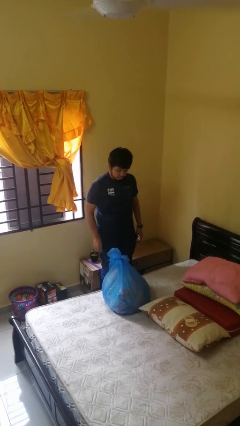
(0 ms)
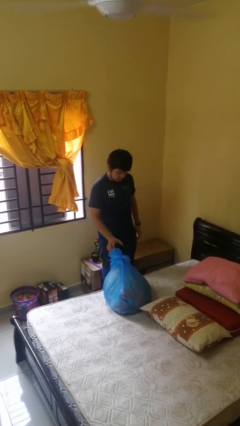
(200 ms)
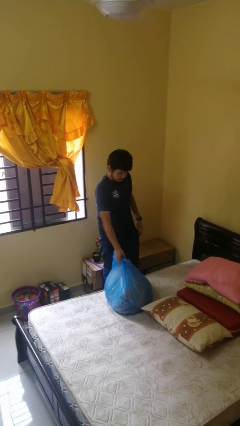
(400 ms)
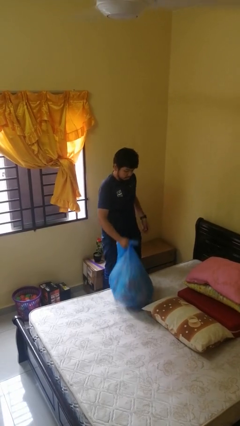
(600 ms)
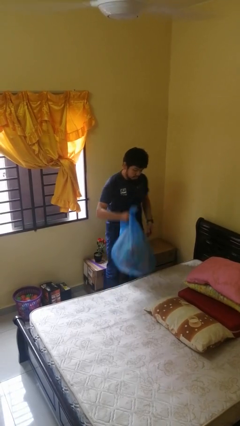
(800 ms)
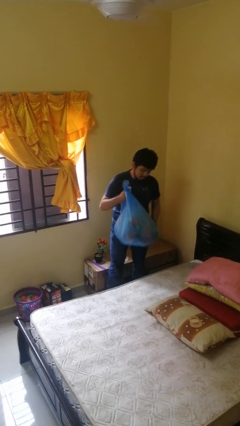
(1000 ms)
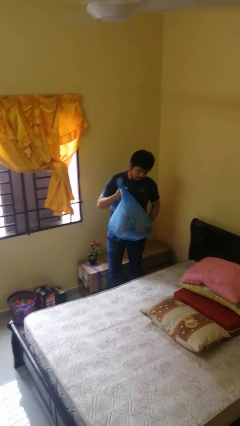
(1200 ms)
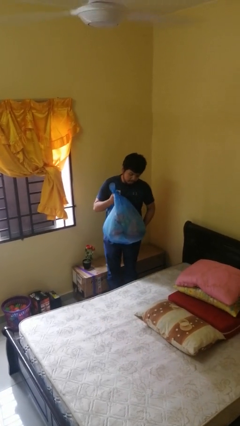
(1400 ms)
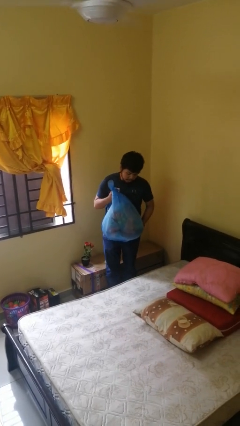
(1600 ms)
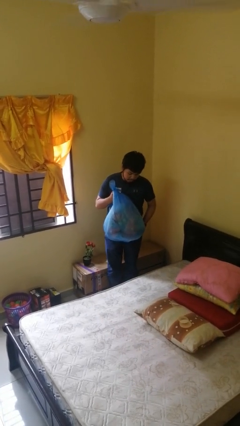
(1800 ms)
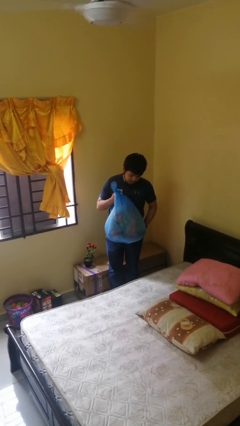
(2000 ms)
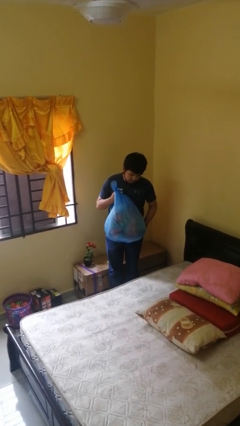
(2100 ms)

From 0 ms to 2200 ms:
person picks up object from bed

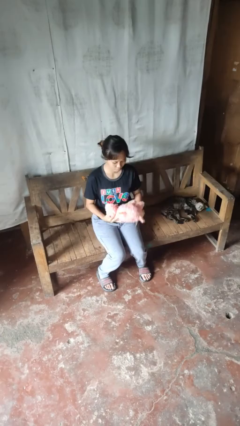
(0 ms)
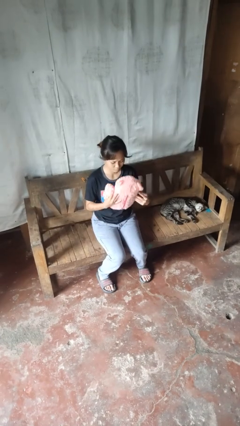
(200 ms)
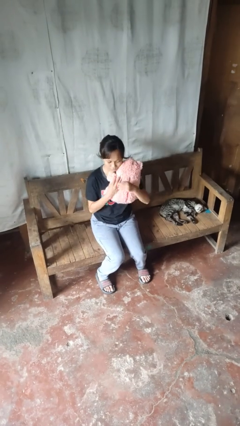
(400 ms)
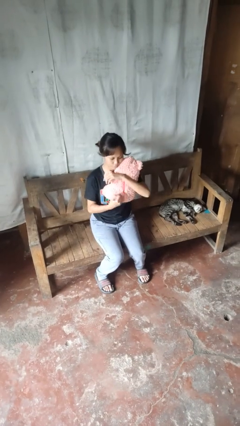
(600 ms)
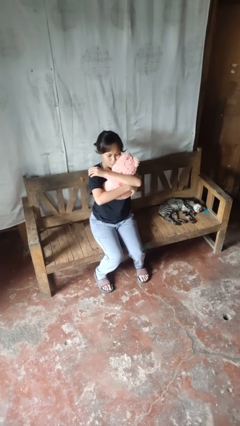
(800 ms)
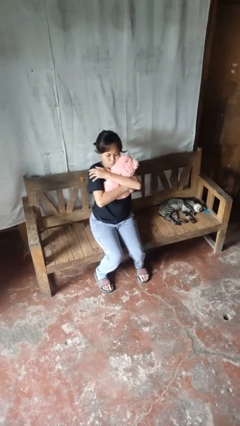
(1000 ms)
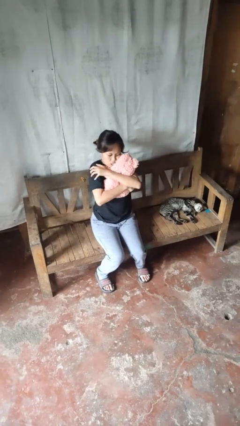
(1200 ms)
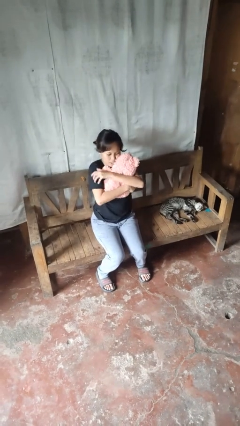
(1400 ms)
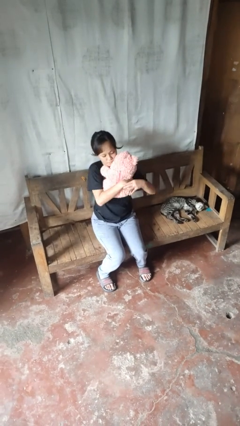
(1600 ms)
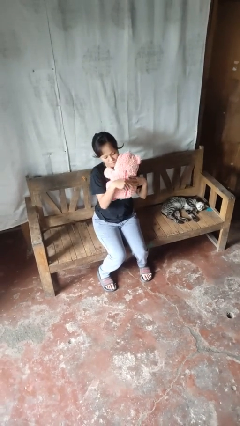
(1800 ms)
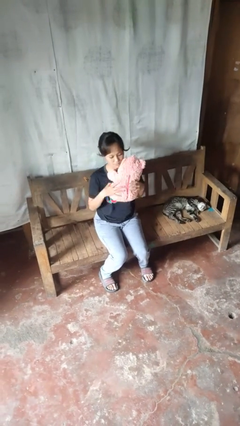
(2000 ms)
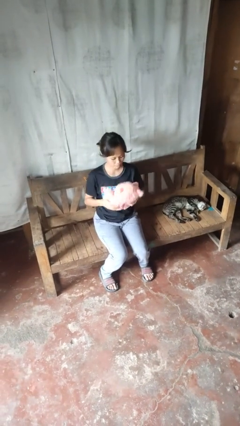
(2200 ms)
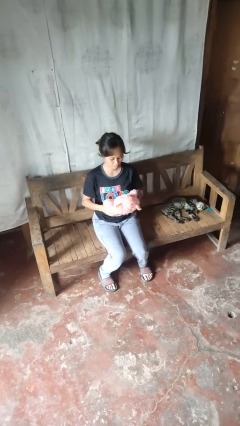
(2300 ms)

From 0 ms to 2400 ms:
person hugs stuffed animal

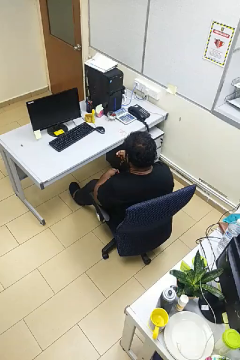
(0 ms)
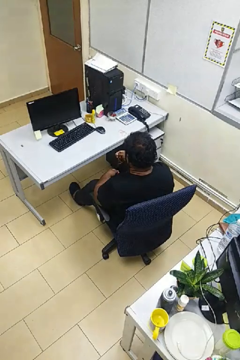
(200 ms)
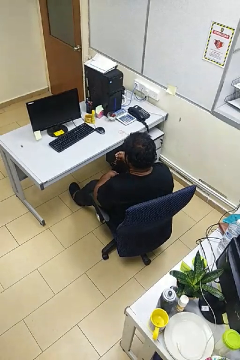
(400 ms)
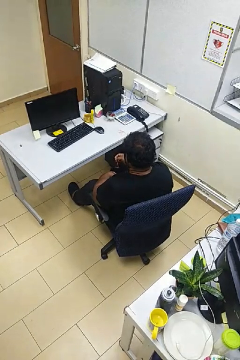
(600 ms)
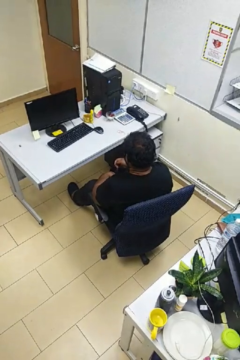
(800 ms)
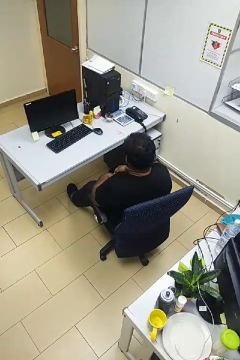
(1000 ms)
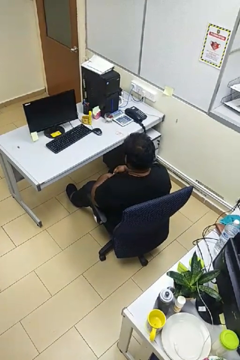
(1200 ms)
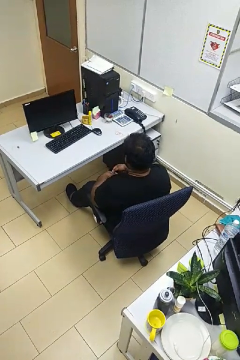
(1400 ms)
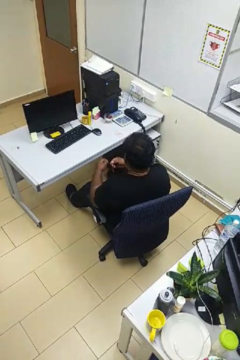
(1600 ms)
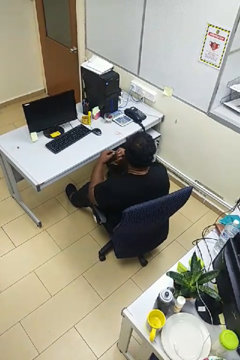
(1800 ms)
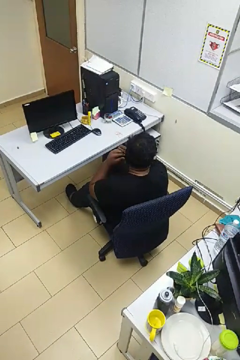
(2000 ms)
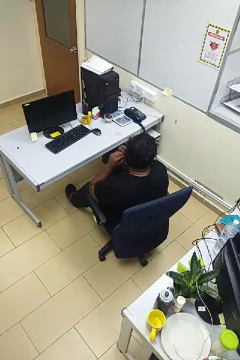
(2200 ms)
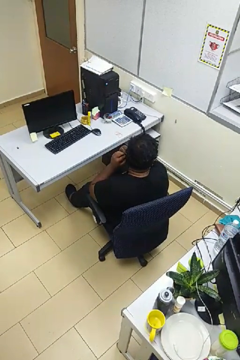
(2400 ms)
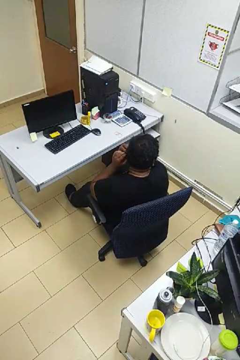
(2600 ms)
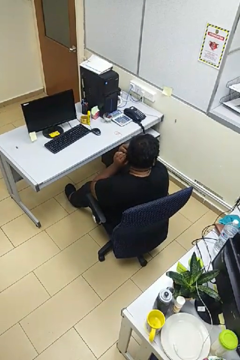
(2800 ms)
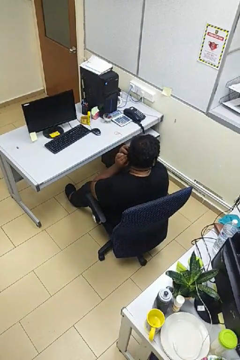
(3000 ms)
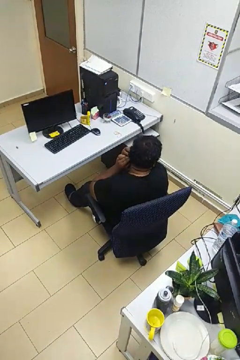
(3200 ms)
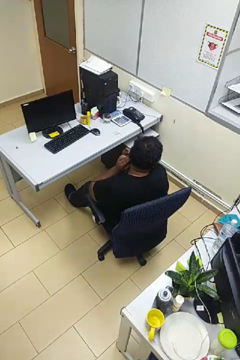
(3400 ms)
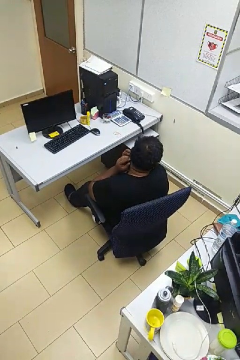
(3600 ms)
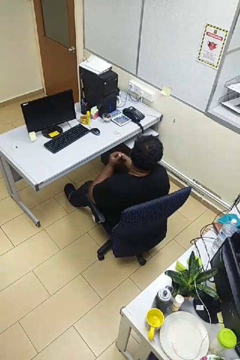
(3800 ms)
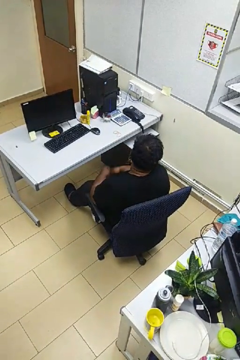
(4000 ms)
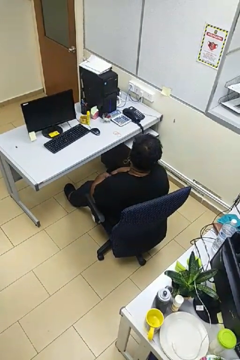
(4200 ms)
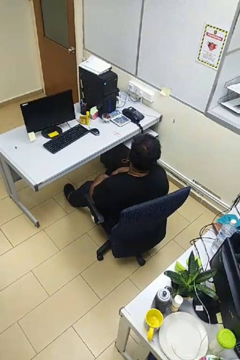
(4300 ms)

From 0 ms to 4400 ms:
person puts on earrings

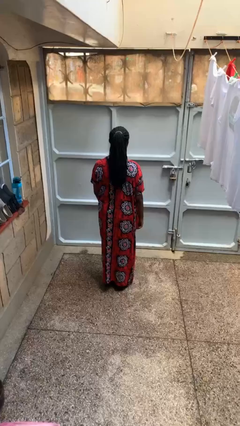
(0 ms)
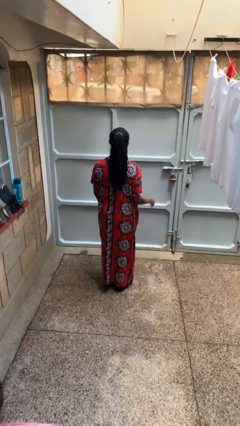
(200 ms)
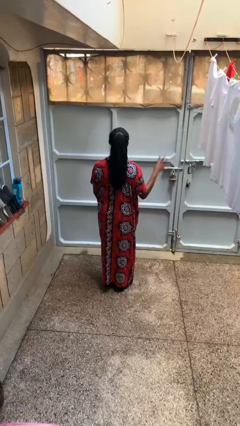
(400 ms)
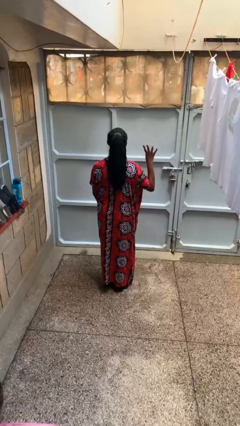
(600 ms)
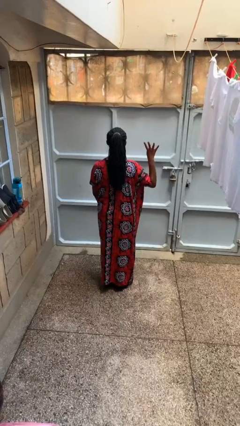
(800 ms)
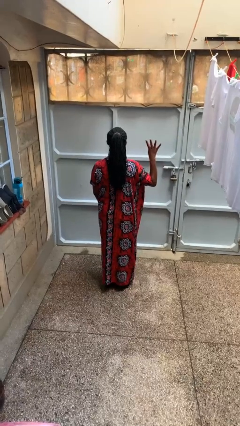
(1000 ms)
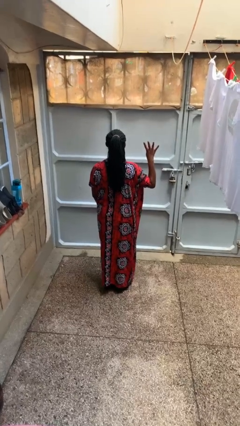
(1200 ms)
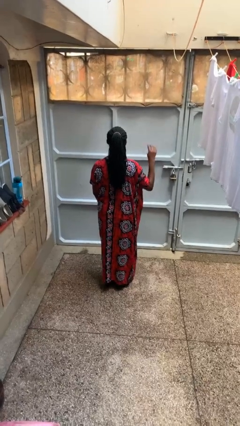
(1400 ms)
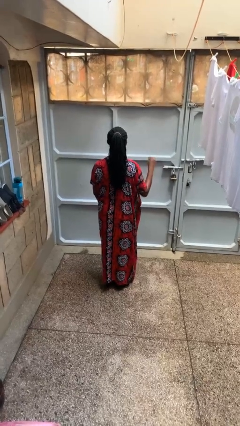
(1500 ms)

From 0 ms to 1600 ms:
person gestures number four

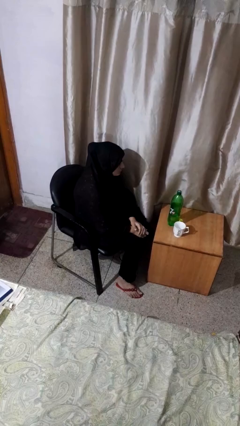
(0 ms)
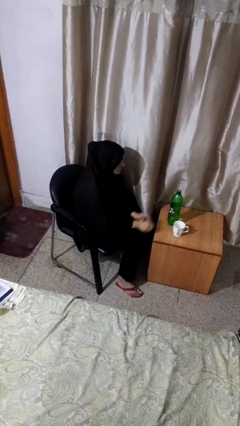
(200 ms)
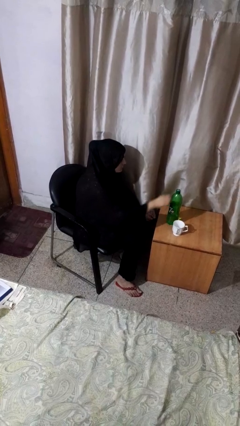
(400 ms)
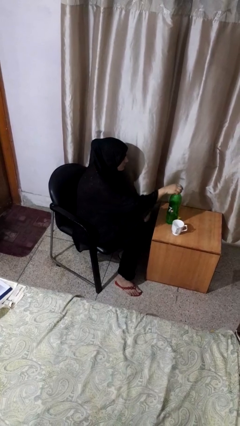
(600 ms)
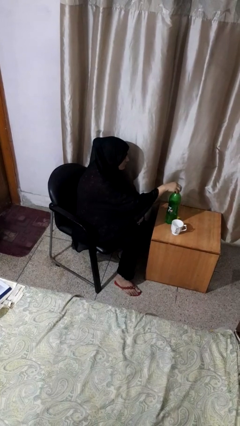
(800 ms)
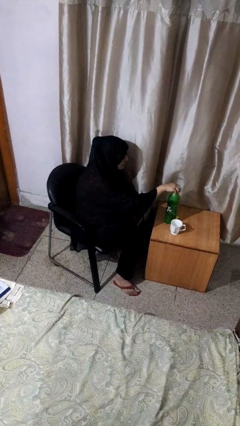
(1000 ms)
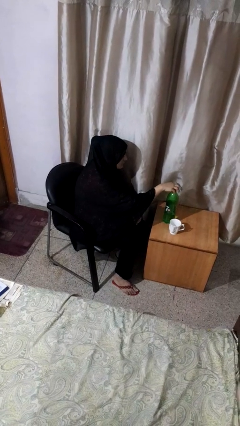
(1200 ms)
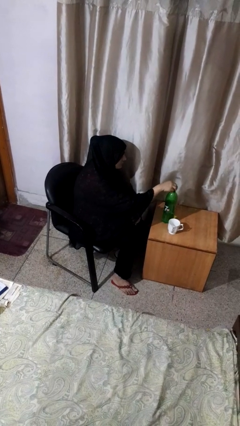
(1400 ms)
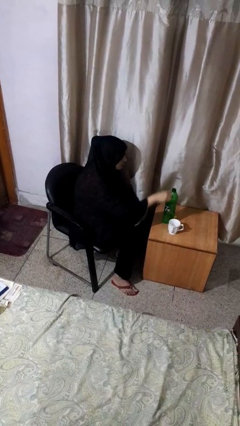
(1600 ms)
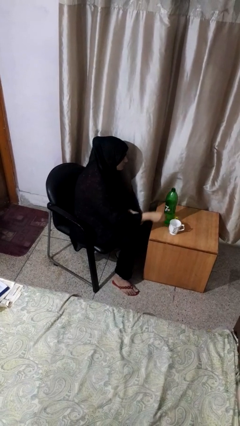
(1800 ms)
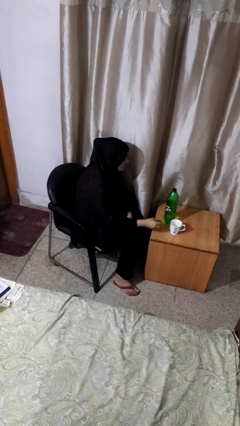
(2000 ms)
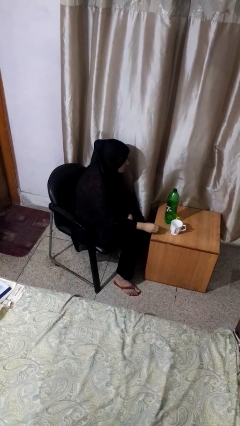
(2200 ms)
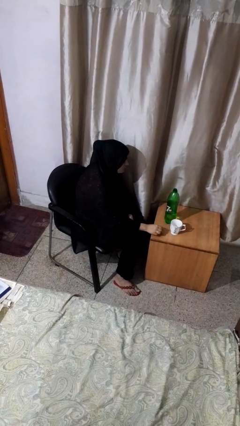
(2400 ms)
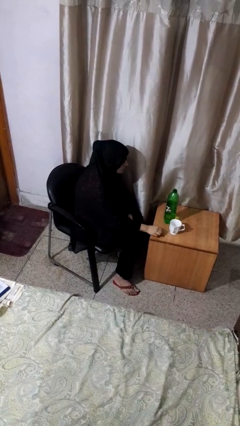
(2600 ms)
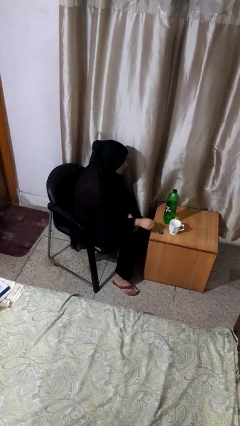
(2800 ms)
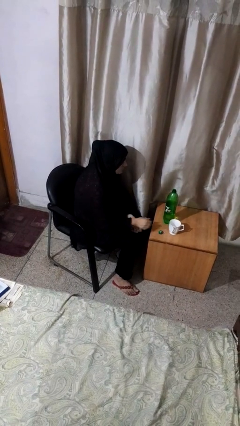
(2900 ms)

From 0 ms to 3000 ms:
person unscrews lid from bottle

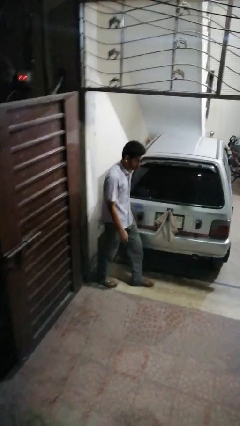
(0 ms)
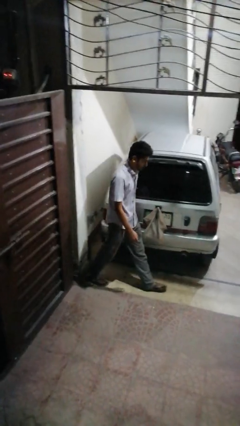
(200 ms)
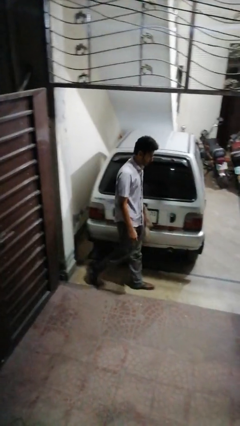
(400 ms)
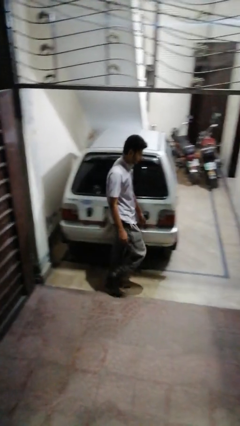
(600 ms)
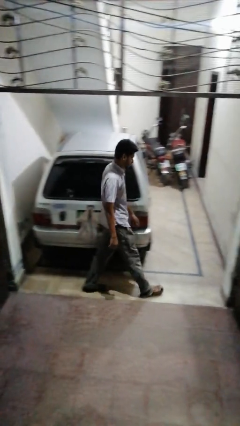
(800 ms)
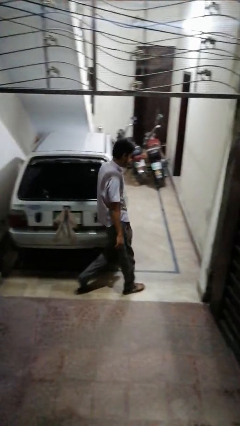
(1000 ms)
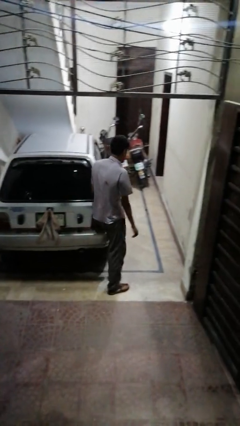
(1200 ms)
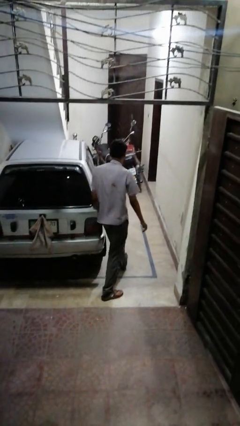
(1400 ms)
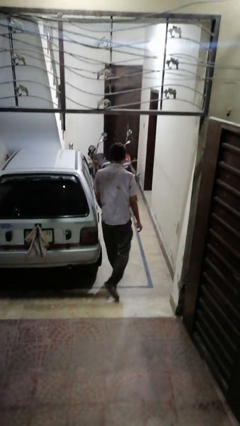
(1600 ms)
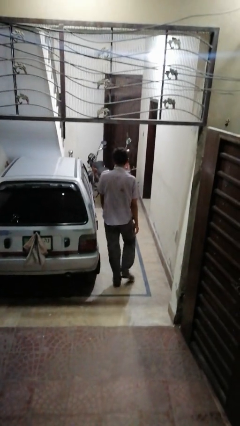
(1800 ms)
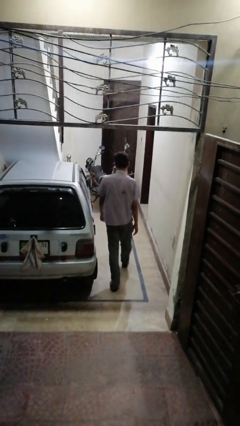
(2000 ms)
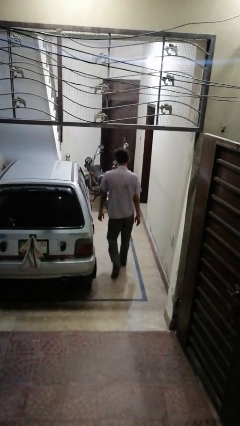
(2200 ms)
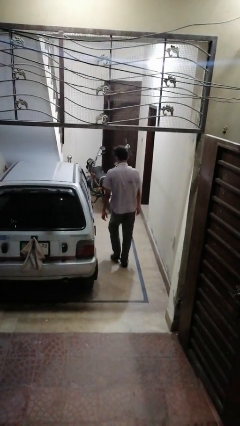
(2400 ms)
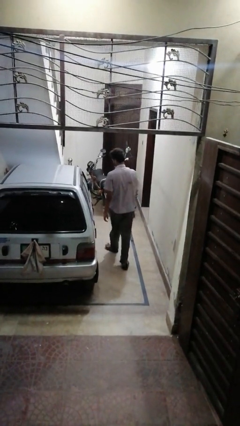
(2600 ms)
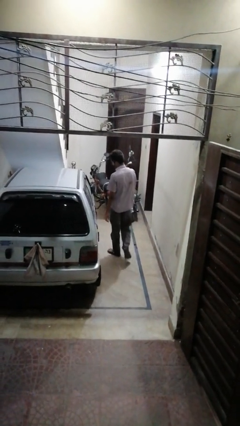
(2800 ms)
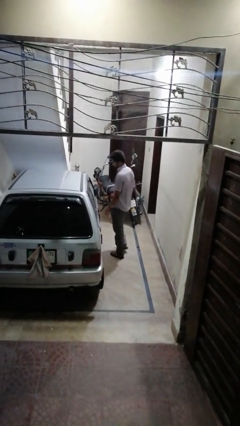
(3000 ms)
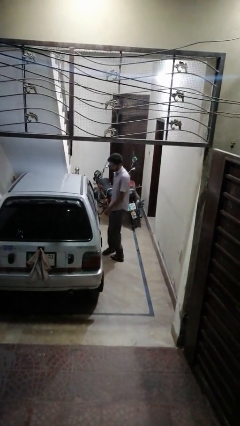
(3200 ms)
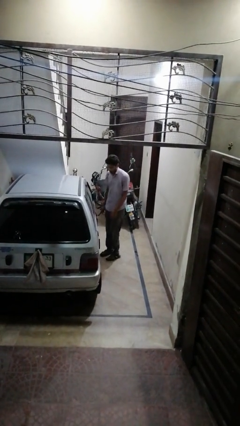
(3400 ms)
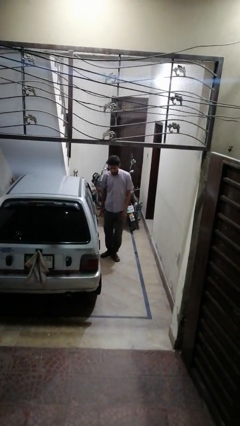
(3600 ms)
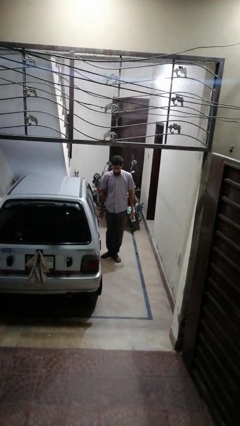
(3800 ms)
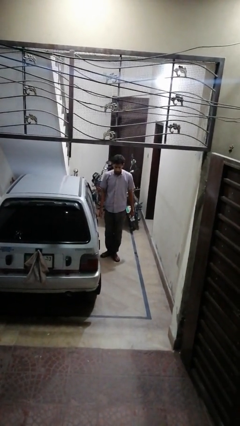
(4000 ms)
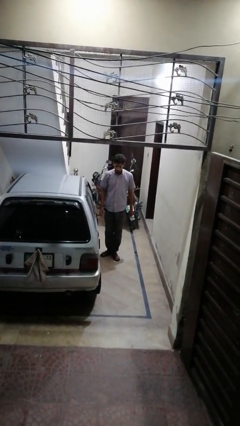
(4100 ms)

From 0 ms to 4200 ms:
person walks around car

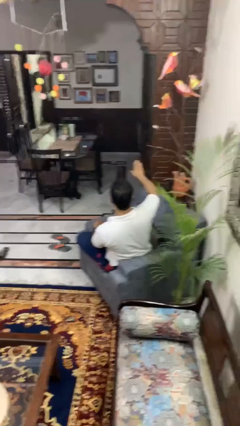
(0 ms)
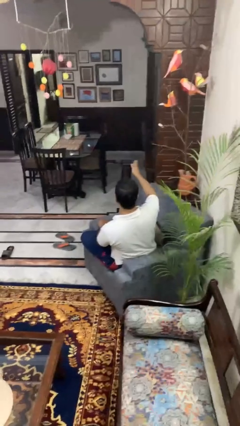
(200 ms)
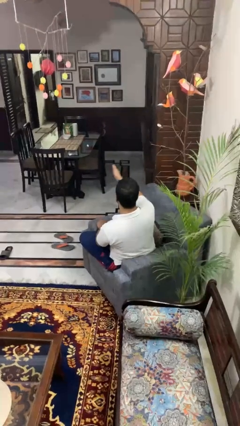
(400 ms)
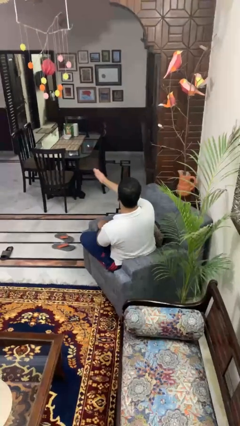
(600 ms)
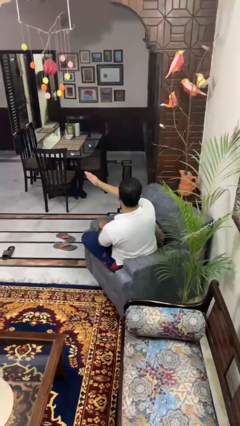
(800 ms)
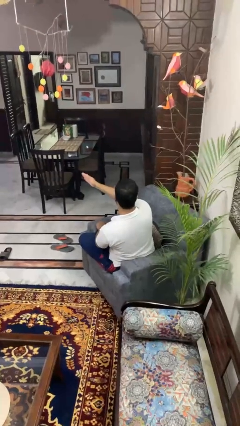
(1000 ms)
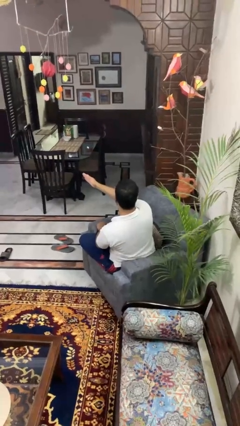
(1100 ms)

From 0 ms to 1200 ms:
person gestures swipe left
